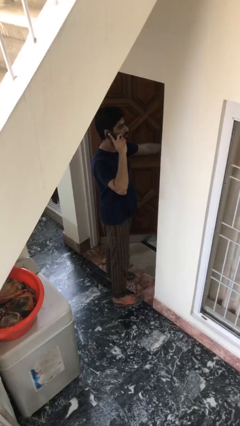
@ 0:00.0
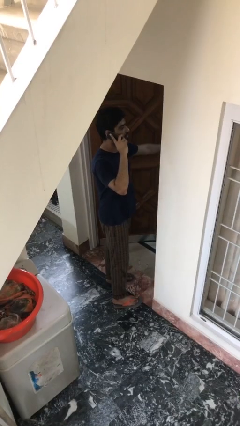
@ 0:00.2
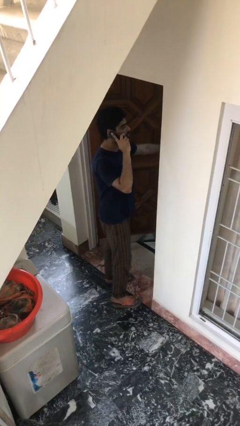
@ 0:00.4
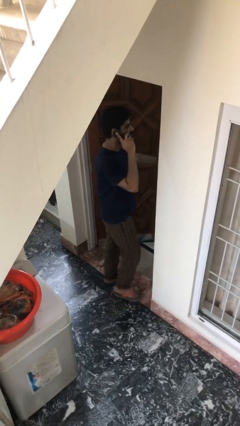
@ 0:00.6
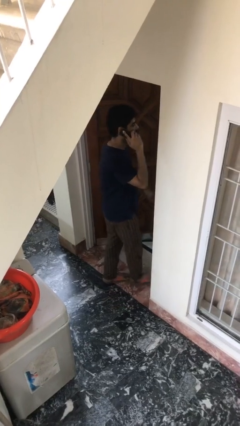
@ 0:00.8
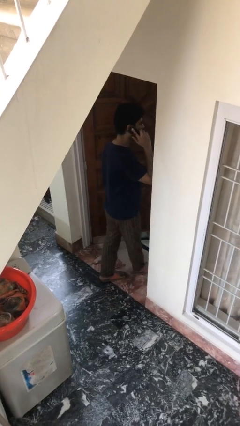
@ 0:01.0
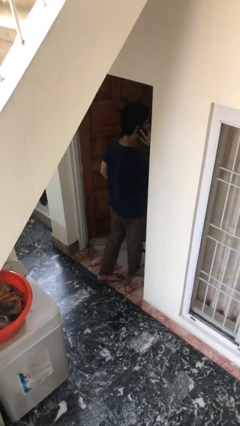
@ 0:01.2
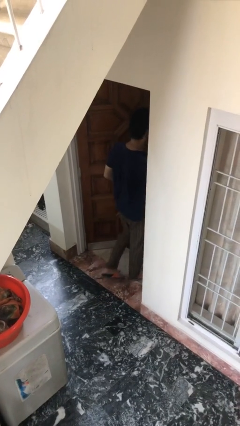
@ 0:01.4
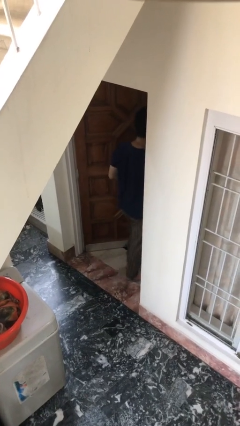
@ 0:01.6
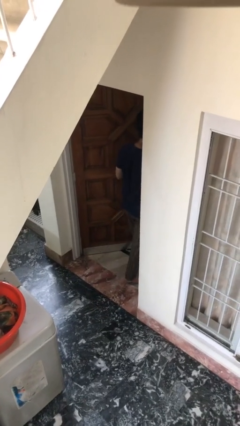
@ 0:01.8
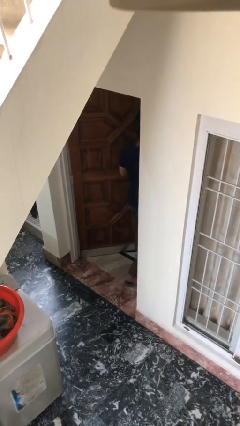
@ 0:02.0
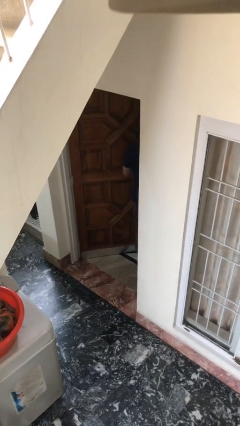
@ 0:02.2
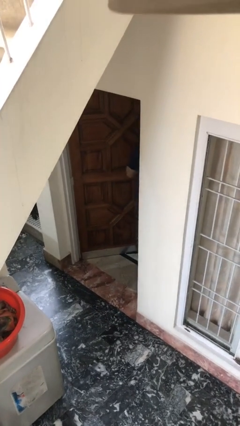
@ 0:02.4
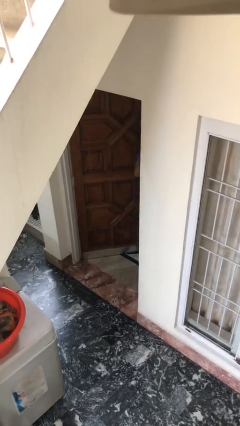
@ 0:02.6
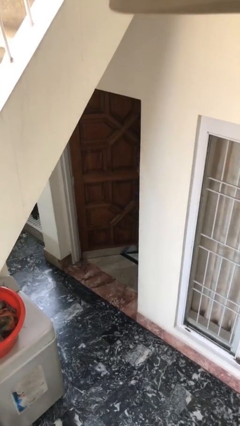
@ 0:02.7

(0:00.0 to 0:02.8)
person exits scene through structure

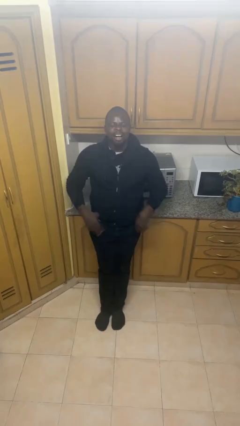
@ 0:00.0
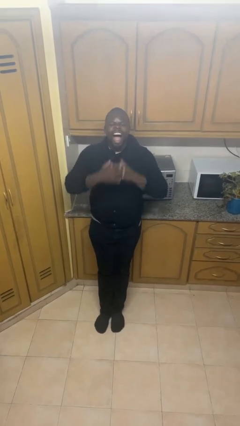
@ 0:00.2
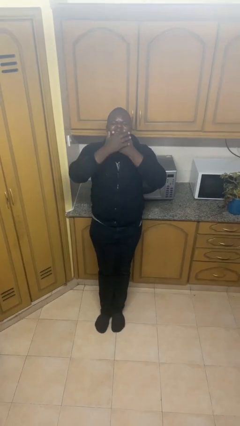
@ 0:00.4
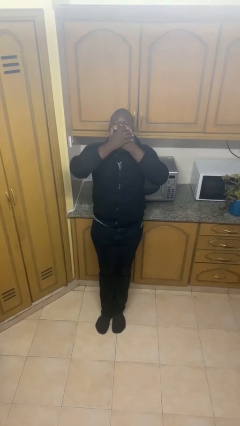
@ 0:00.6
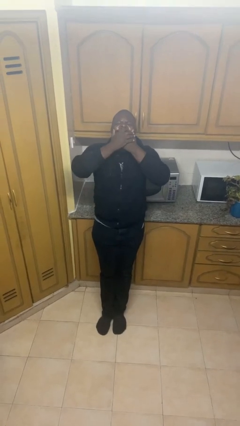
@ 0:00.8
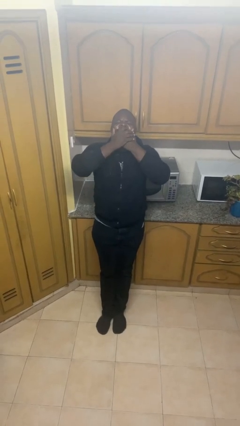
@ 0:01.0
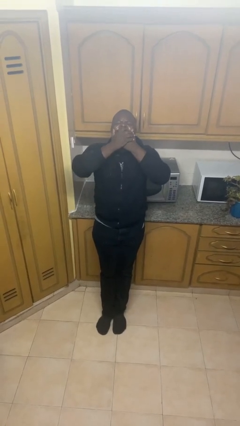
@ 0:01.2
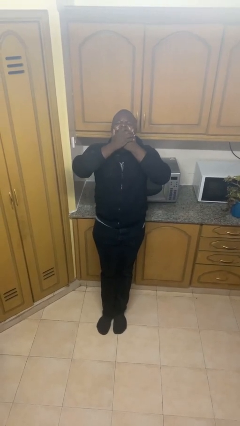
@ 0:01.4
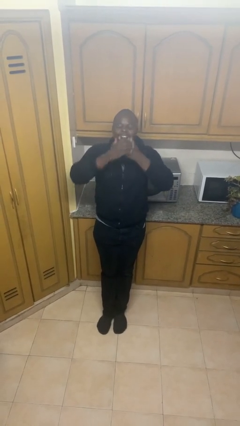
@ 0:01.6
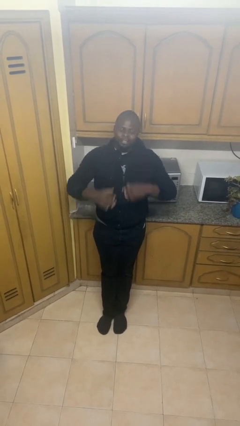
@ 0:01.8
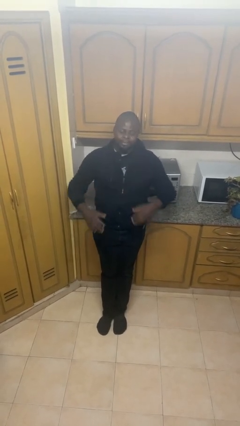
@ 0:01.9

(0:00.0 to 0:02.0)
person yawns

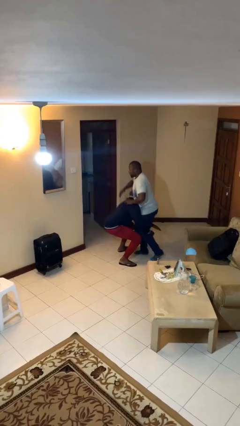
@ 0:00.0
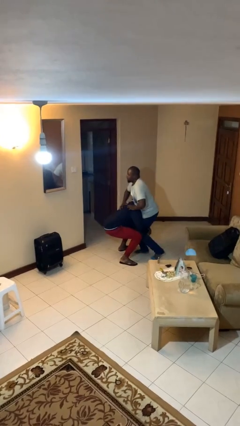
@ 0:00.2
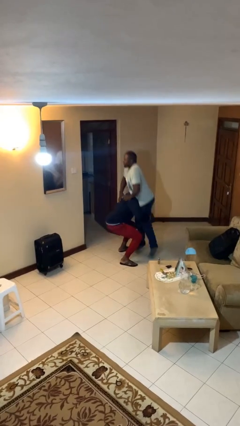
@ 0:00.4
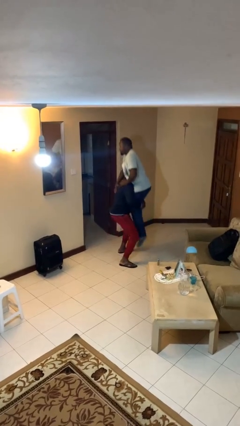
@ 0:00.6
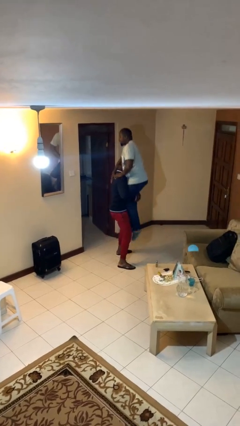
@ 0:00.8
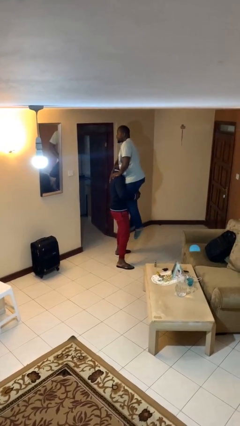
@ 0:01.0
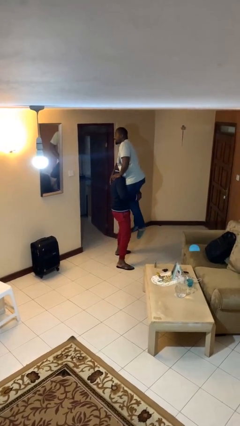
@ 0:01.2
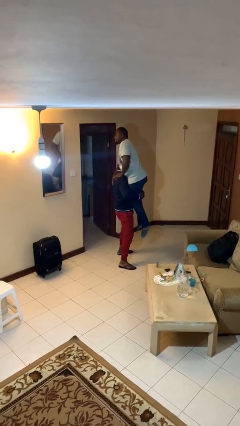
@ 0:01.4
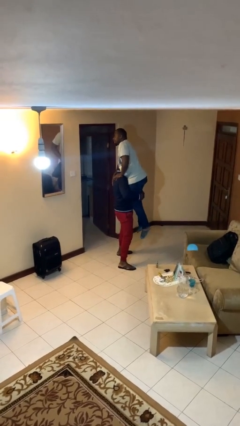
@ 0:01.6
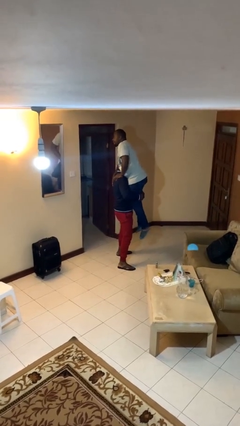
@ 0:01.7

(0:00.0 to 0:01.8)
person picks up person

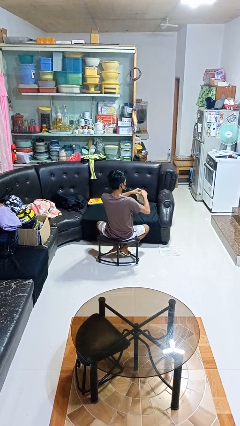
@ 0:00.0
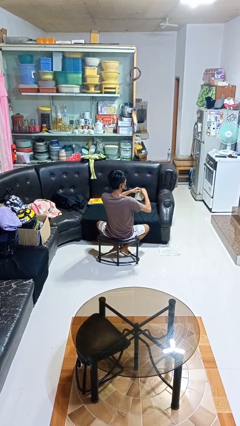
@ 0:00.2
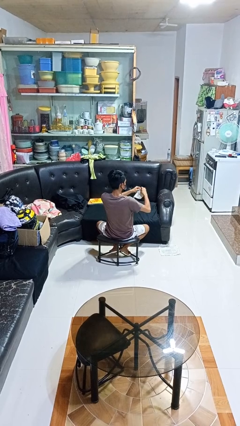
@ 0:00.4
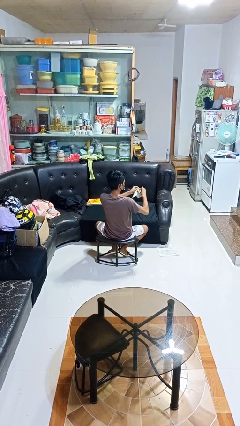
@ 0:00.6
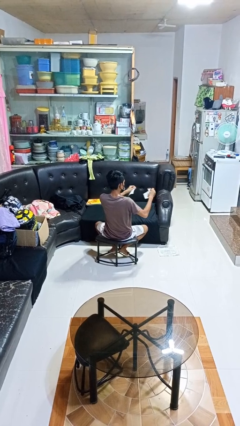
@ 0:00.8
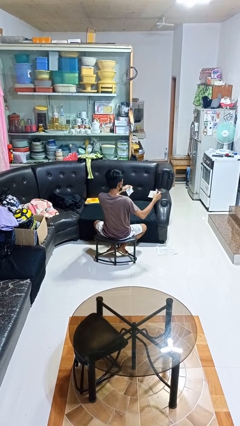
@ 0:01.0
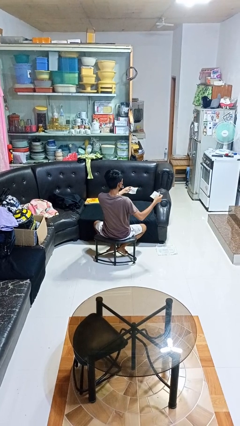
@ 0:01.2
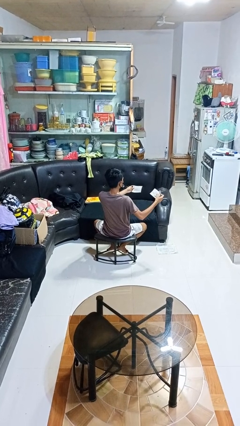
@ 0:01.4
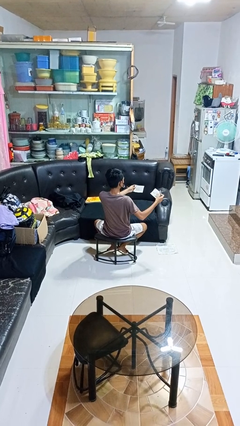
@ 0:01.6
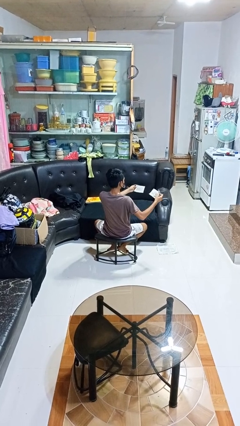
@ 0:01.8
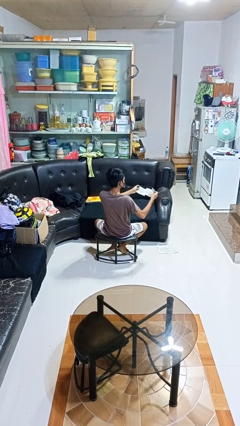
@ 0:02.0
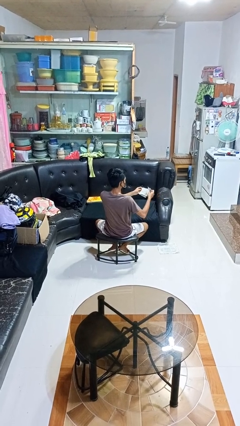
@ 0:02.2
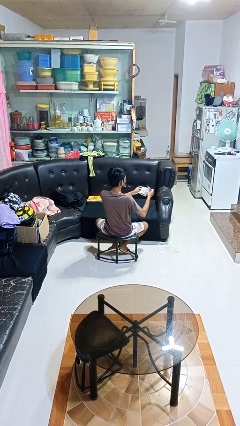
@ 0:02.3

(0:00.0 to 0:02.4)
person tears paper

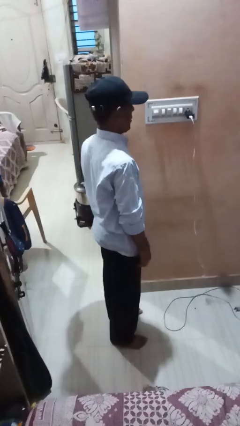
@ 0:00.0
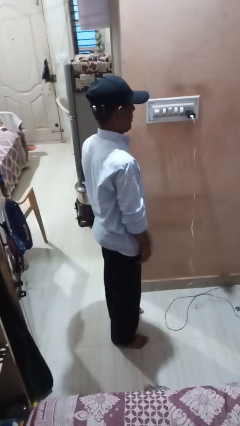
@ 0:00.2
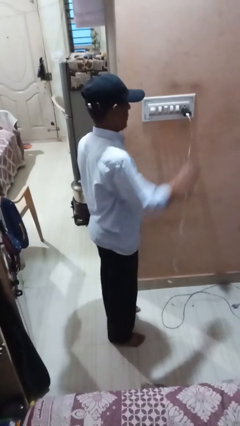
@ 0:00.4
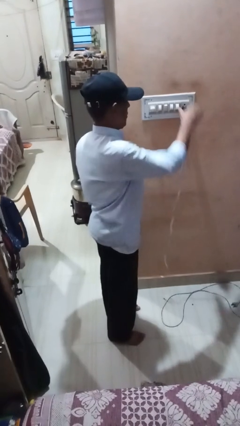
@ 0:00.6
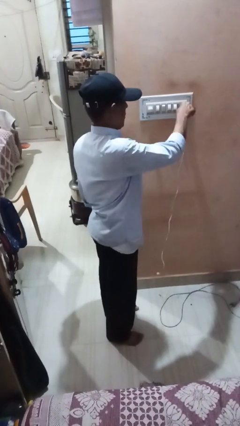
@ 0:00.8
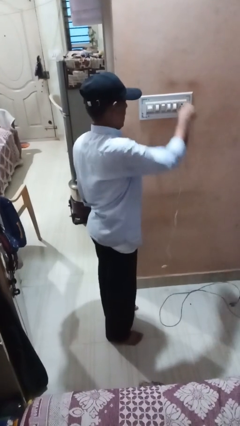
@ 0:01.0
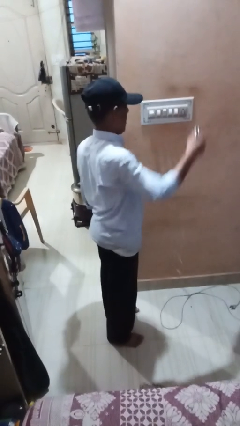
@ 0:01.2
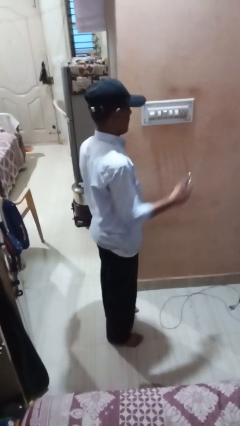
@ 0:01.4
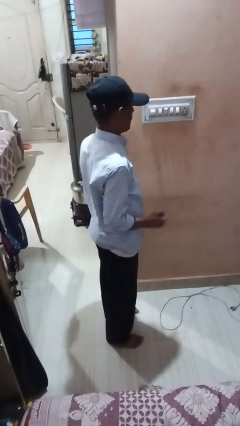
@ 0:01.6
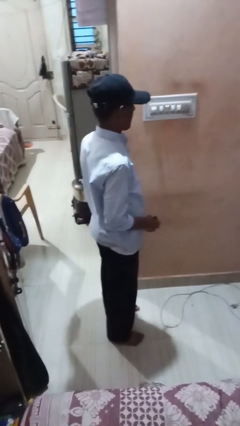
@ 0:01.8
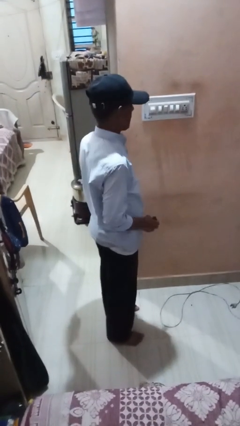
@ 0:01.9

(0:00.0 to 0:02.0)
person unplugs from electrical socket

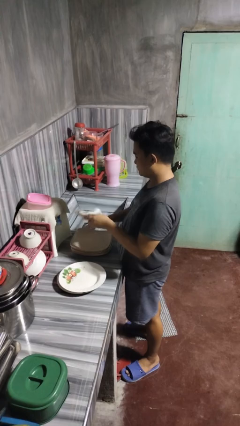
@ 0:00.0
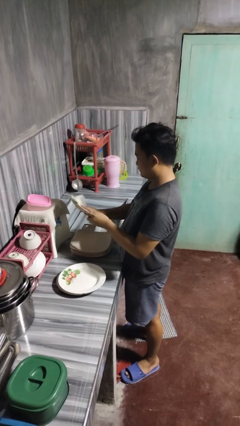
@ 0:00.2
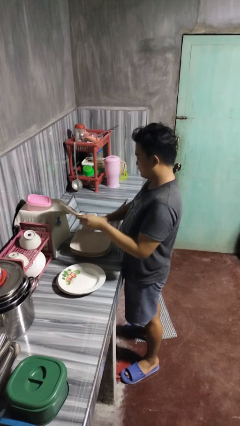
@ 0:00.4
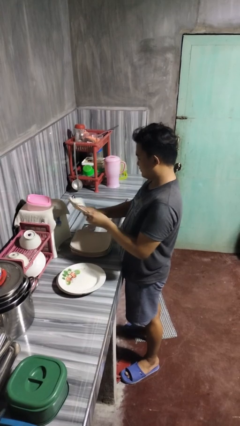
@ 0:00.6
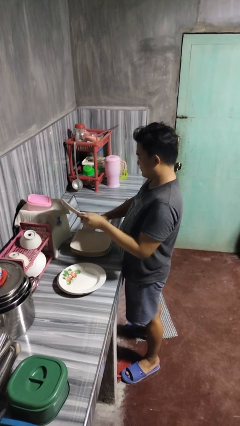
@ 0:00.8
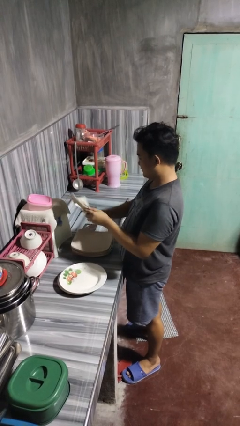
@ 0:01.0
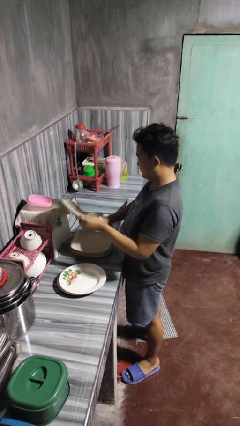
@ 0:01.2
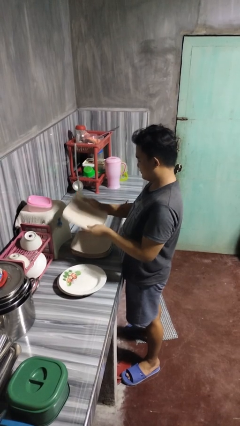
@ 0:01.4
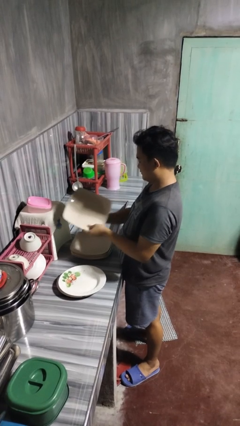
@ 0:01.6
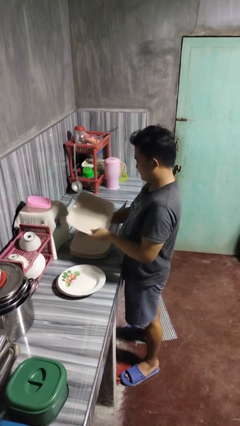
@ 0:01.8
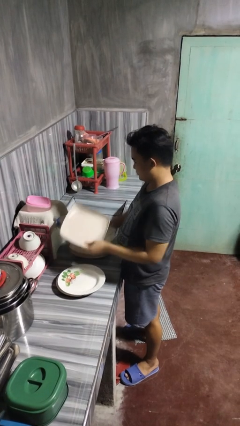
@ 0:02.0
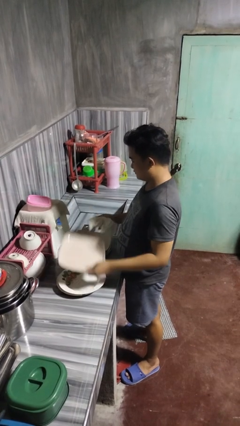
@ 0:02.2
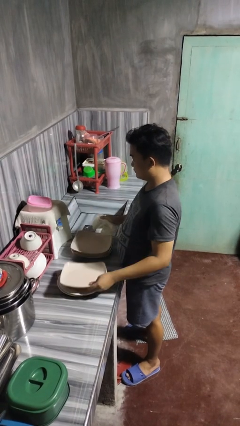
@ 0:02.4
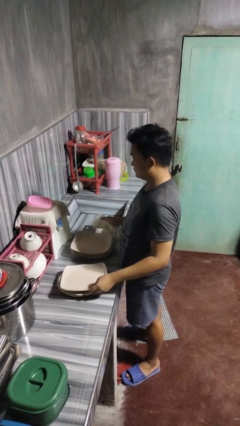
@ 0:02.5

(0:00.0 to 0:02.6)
person dries dish

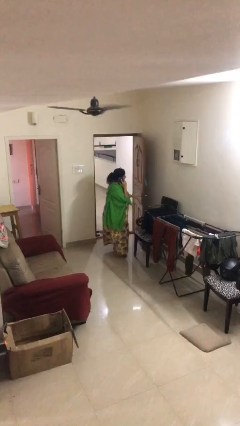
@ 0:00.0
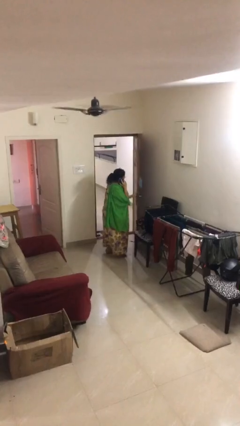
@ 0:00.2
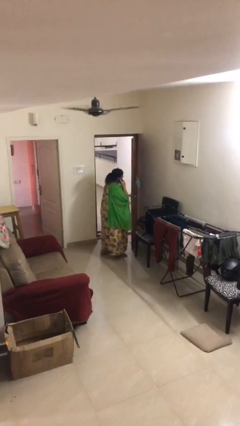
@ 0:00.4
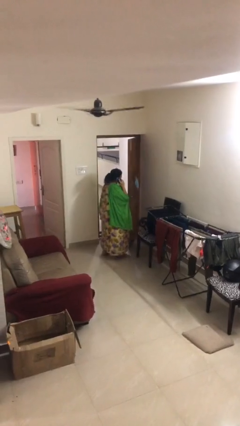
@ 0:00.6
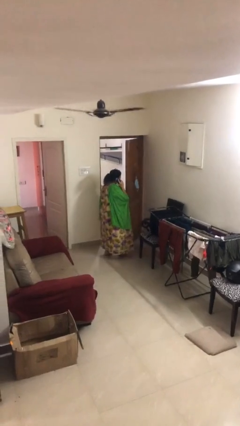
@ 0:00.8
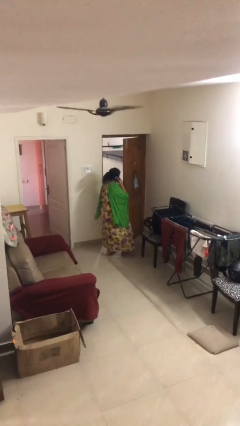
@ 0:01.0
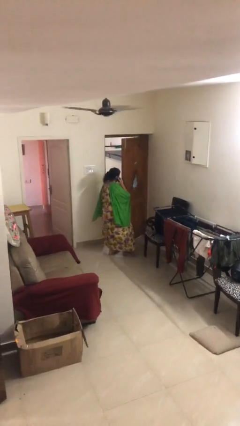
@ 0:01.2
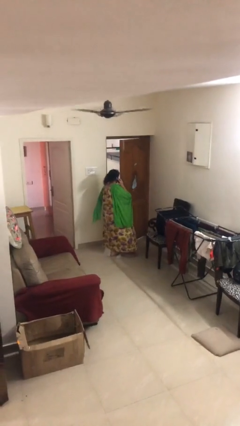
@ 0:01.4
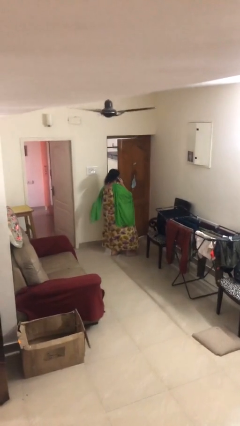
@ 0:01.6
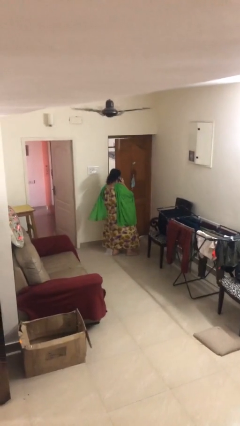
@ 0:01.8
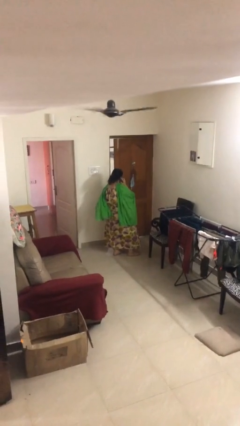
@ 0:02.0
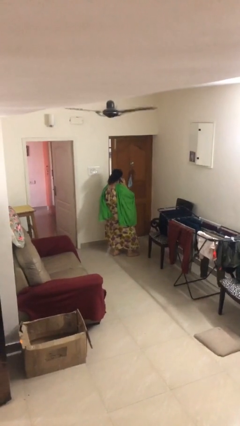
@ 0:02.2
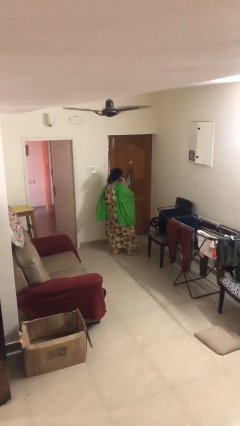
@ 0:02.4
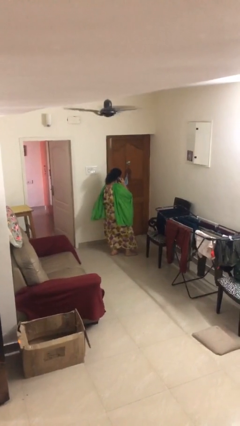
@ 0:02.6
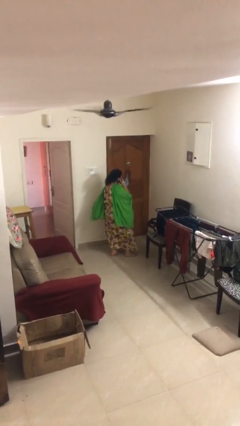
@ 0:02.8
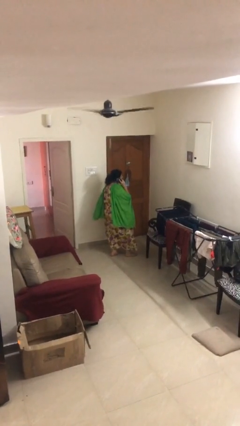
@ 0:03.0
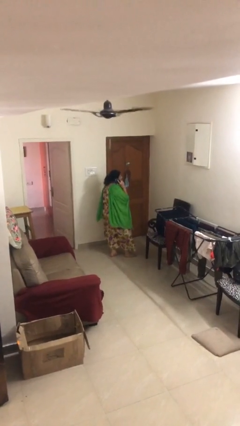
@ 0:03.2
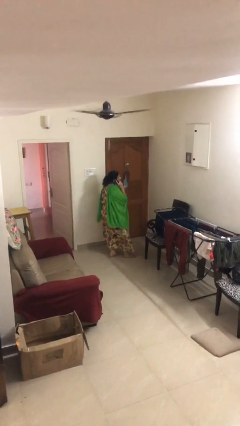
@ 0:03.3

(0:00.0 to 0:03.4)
person closes facility door
